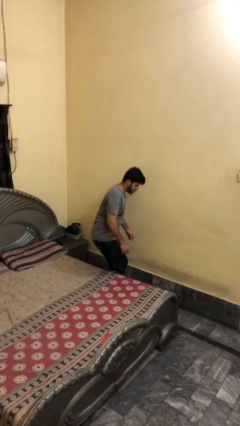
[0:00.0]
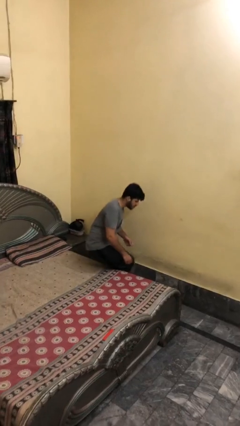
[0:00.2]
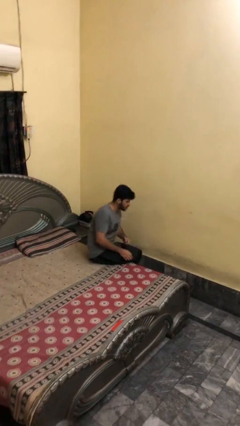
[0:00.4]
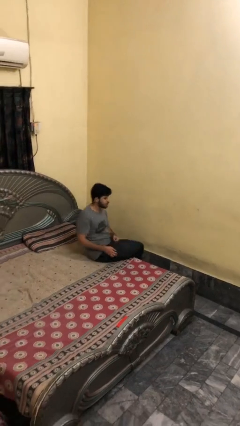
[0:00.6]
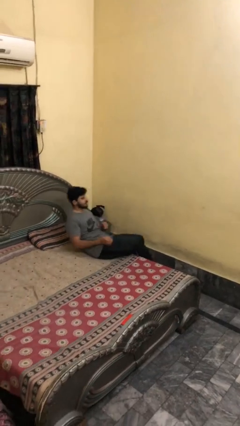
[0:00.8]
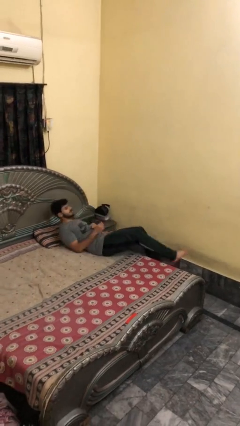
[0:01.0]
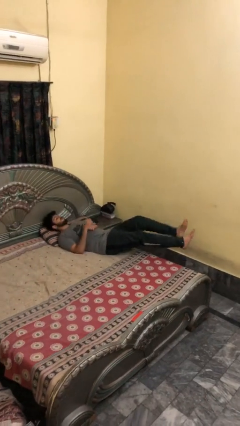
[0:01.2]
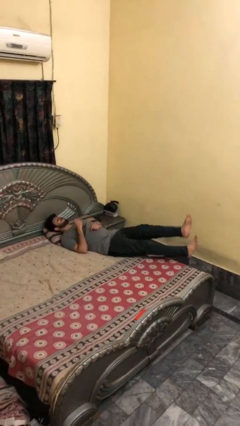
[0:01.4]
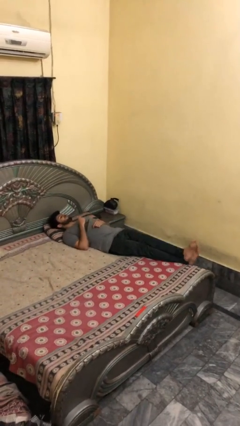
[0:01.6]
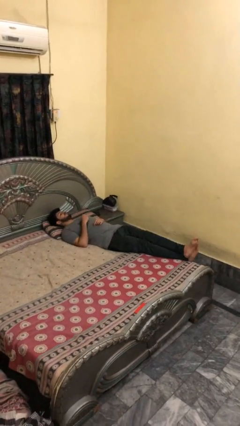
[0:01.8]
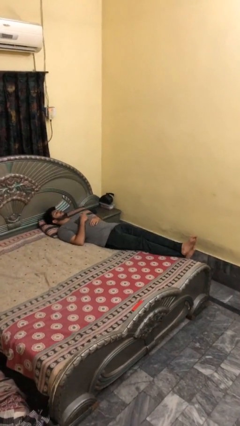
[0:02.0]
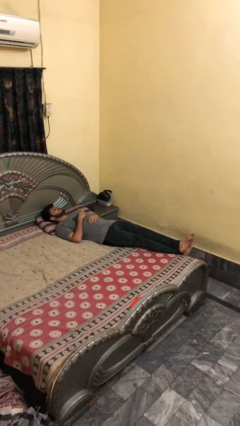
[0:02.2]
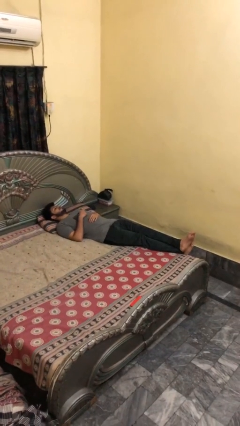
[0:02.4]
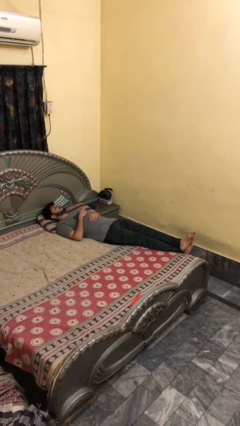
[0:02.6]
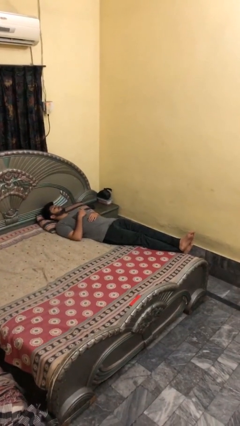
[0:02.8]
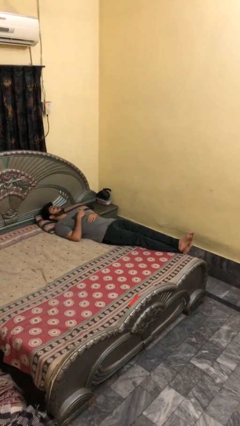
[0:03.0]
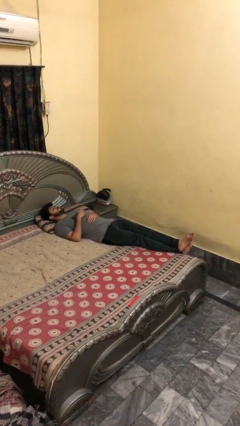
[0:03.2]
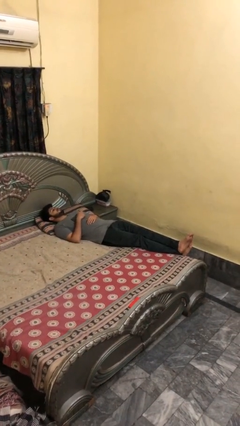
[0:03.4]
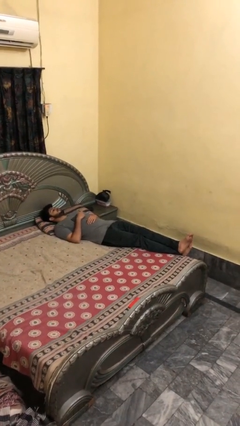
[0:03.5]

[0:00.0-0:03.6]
person lies down on bed

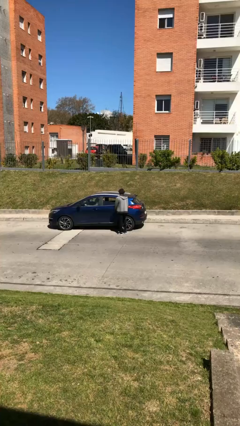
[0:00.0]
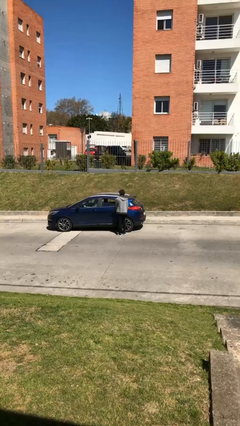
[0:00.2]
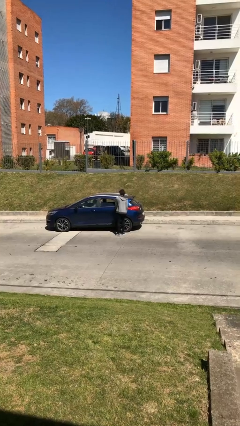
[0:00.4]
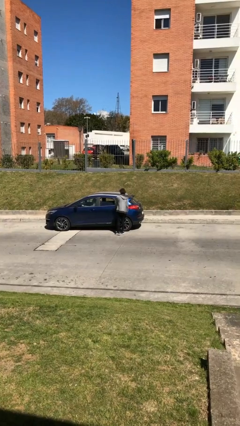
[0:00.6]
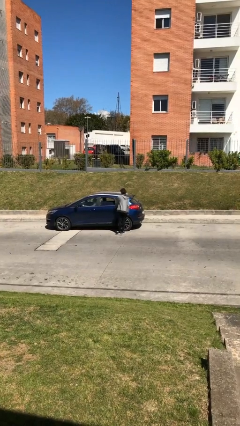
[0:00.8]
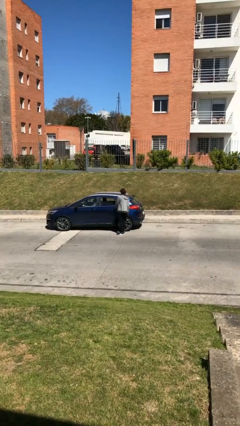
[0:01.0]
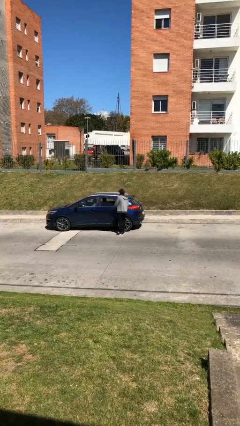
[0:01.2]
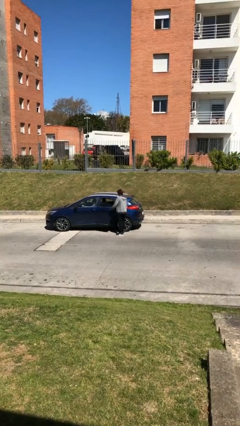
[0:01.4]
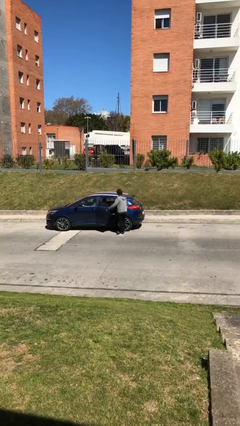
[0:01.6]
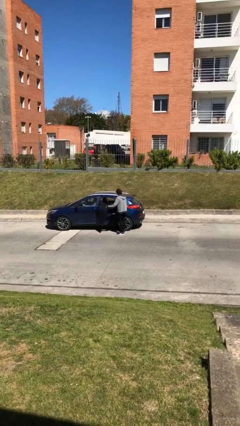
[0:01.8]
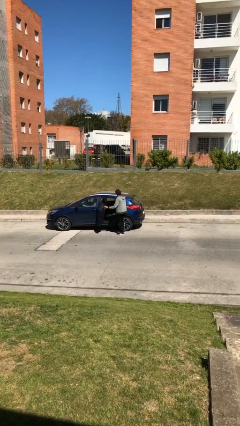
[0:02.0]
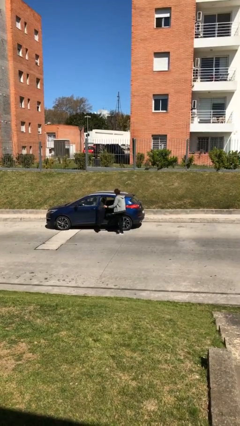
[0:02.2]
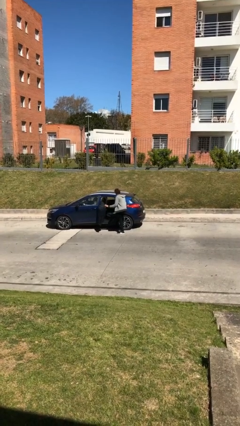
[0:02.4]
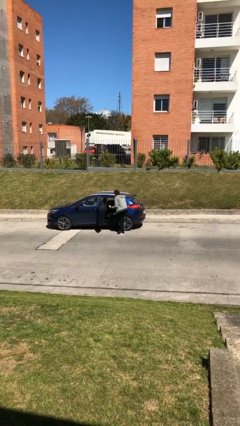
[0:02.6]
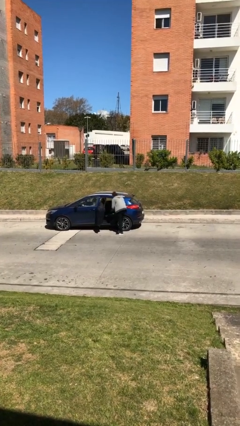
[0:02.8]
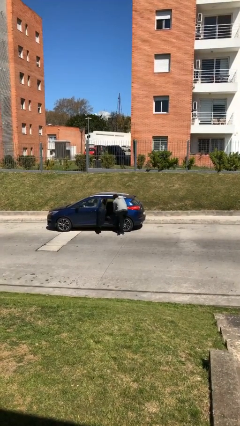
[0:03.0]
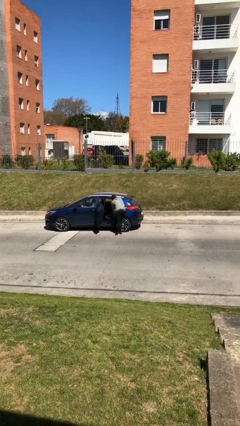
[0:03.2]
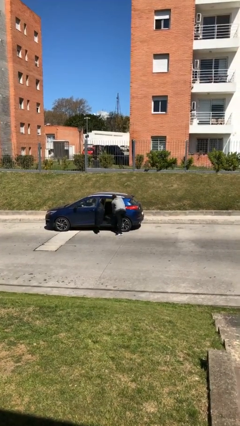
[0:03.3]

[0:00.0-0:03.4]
person opens car door

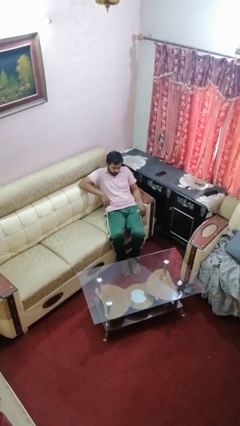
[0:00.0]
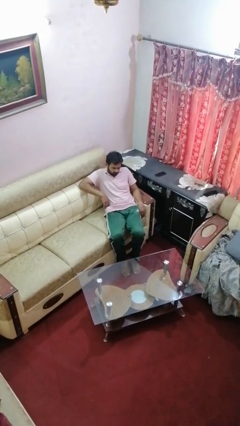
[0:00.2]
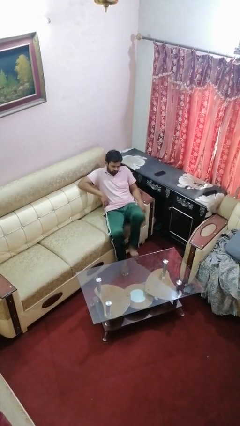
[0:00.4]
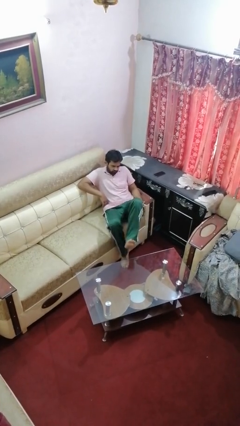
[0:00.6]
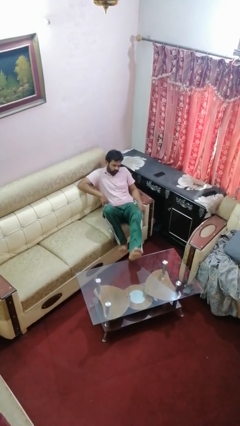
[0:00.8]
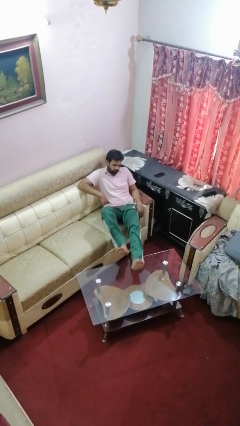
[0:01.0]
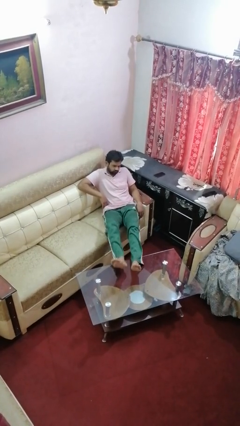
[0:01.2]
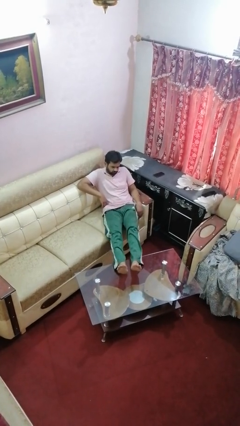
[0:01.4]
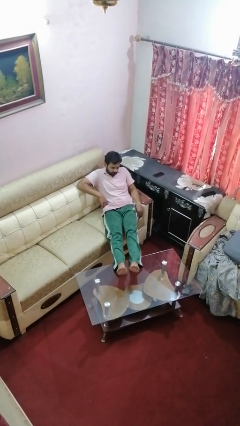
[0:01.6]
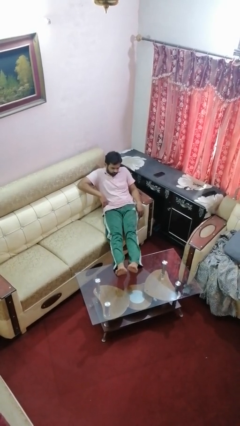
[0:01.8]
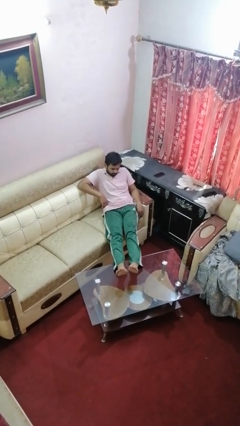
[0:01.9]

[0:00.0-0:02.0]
person puts feet up

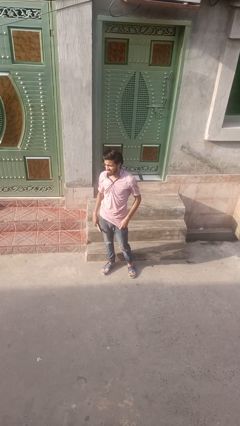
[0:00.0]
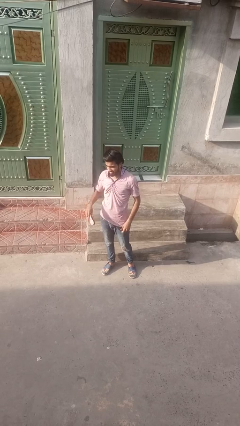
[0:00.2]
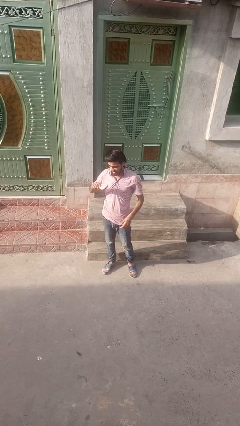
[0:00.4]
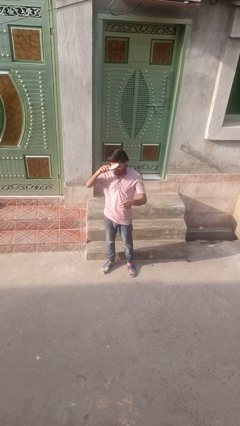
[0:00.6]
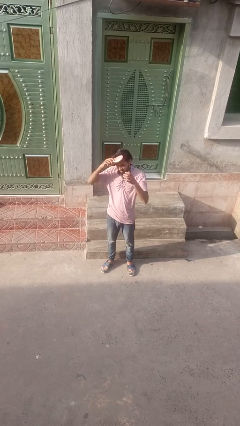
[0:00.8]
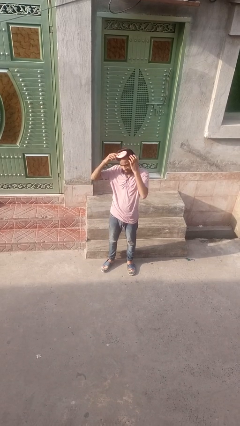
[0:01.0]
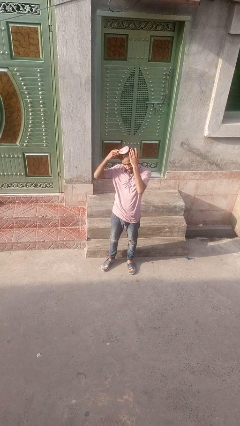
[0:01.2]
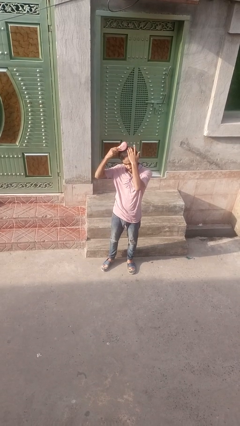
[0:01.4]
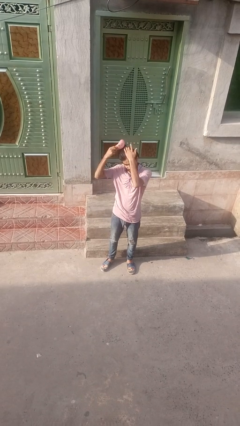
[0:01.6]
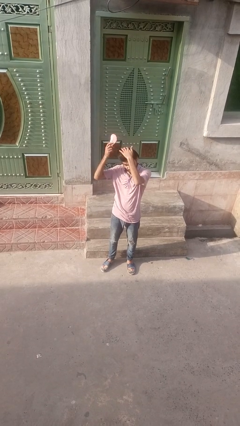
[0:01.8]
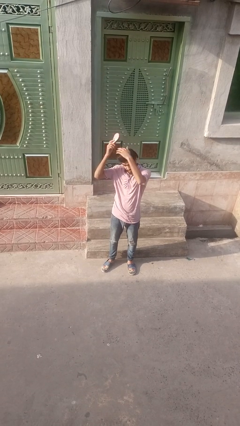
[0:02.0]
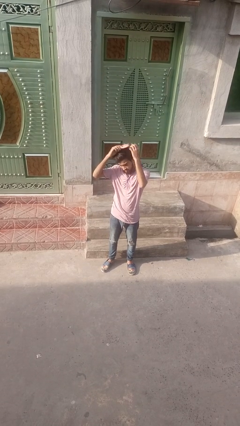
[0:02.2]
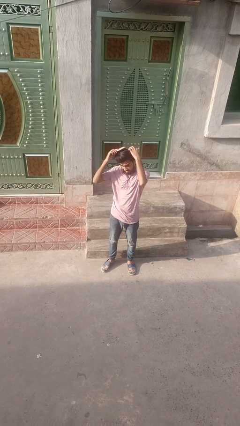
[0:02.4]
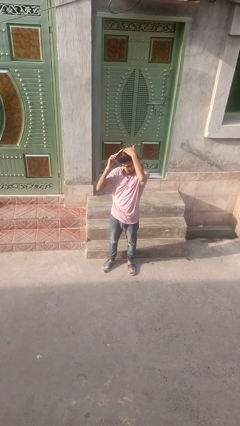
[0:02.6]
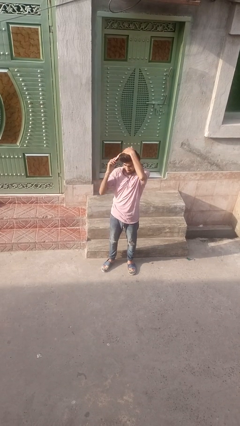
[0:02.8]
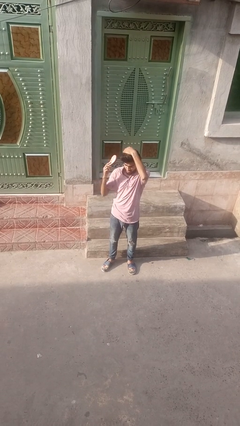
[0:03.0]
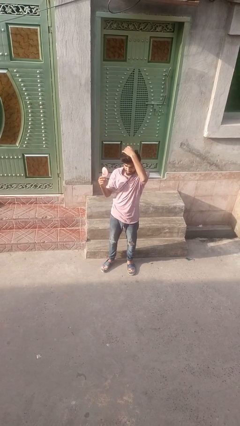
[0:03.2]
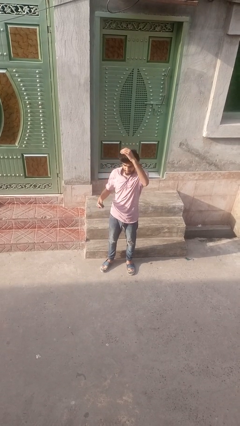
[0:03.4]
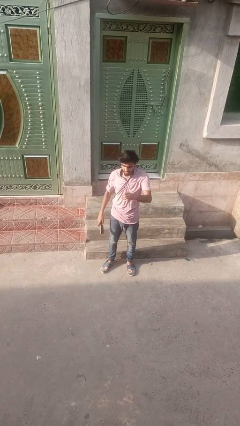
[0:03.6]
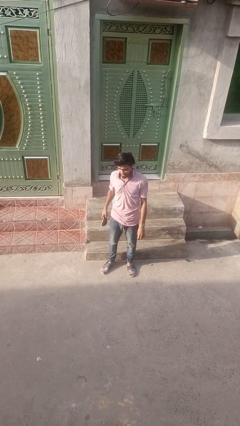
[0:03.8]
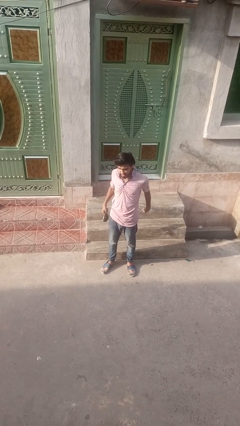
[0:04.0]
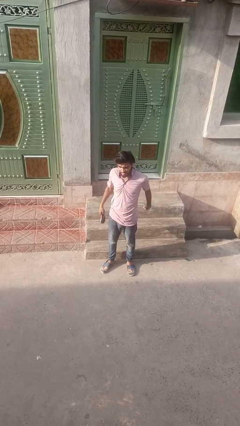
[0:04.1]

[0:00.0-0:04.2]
person brushes hair

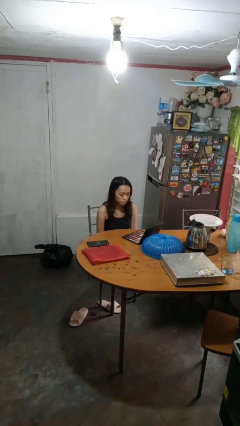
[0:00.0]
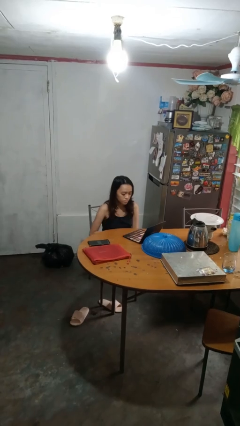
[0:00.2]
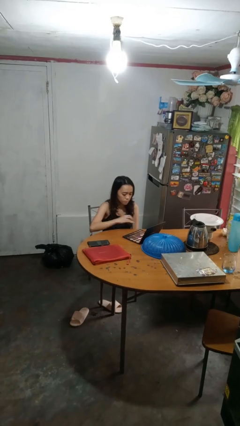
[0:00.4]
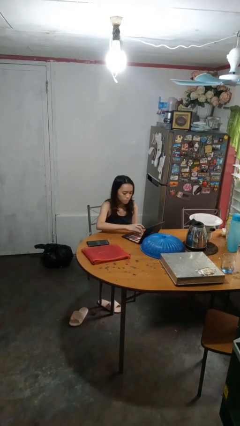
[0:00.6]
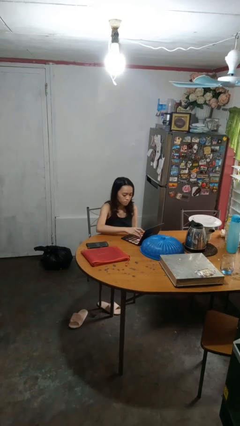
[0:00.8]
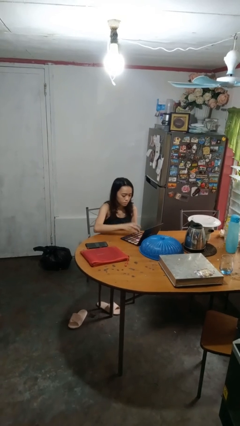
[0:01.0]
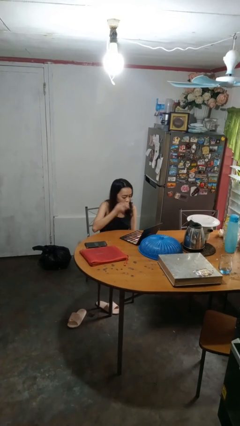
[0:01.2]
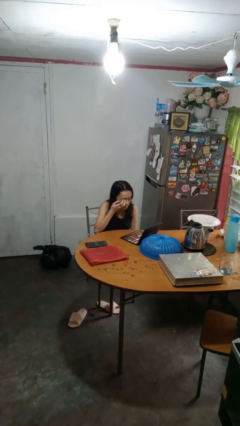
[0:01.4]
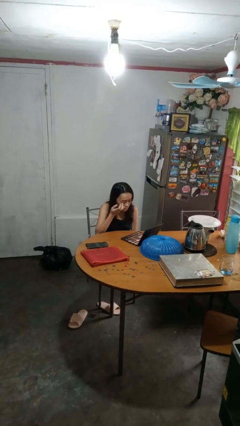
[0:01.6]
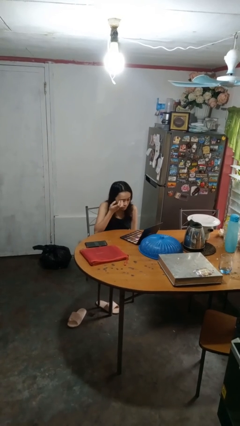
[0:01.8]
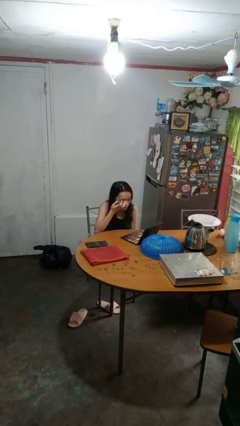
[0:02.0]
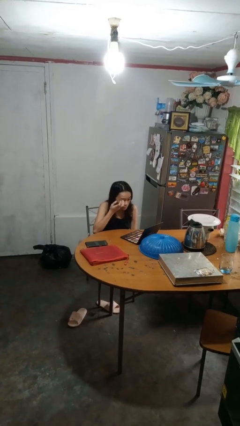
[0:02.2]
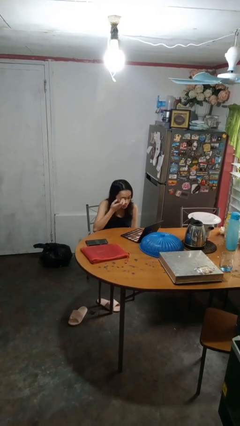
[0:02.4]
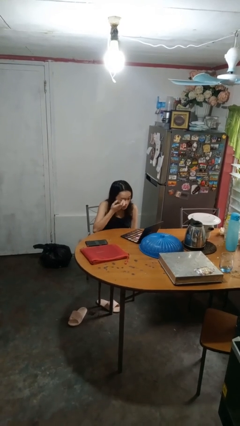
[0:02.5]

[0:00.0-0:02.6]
person applies eye makeup

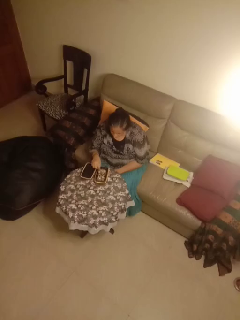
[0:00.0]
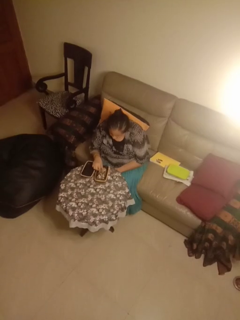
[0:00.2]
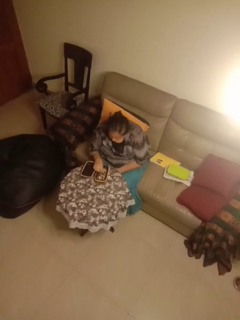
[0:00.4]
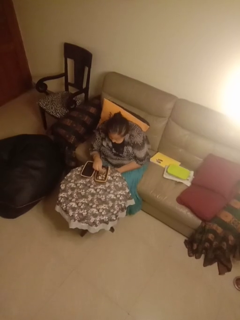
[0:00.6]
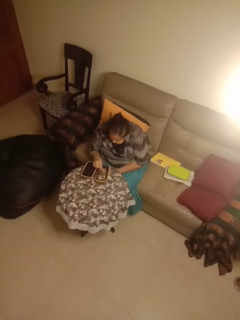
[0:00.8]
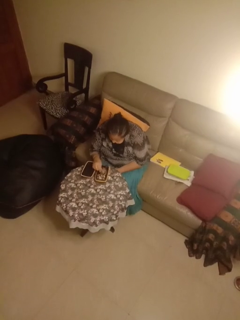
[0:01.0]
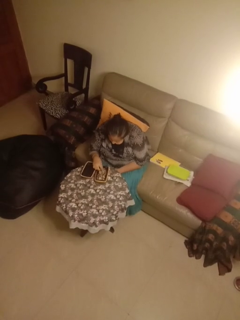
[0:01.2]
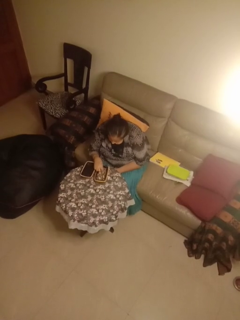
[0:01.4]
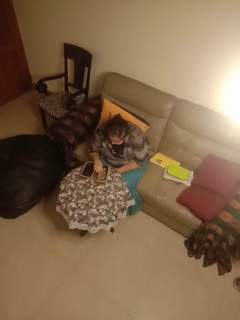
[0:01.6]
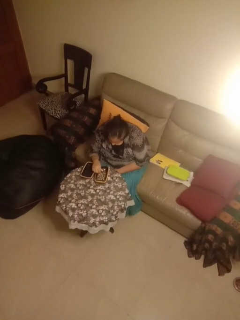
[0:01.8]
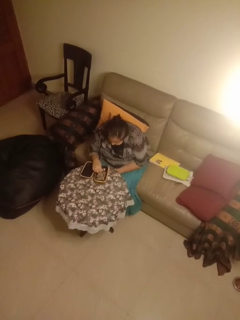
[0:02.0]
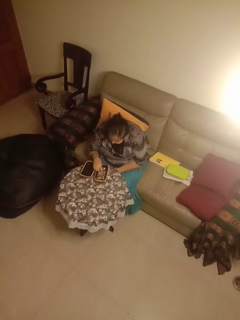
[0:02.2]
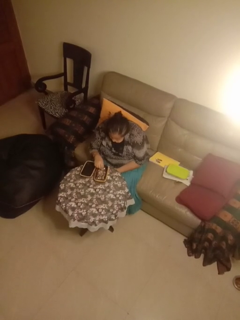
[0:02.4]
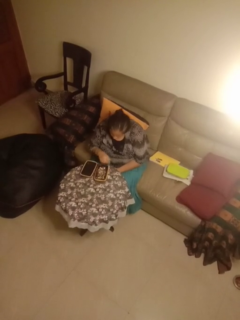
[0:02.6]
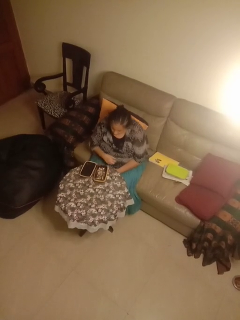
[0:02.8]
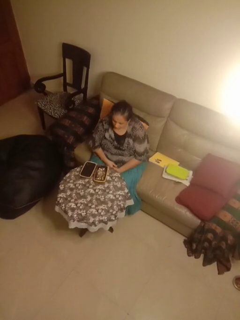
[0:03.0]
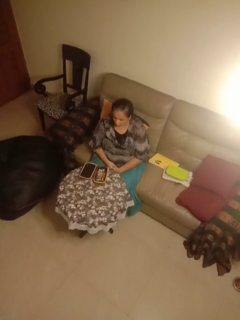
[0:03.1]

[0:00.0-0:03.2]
person searches jewelry box
